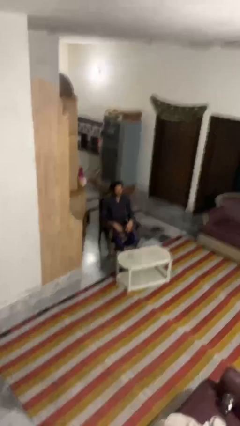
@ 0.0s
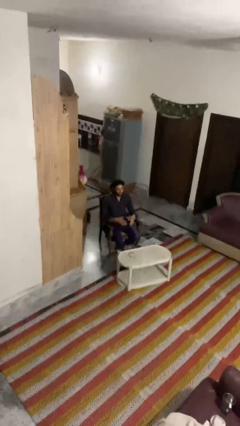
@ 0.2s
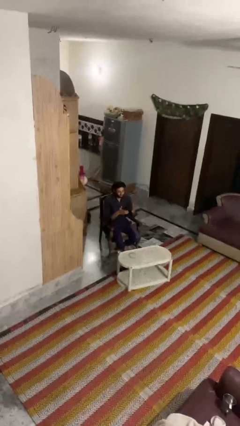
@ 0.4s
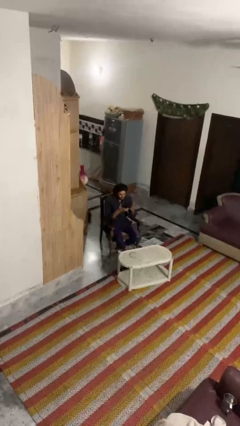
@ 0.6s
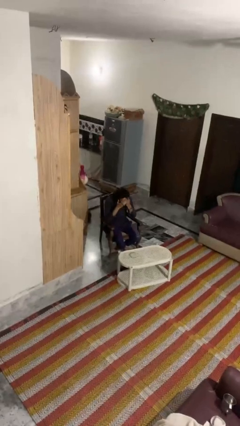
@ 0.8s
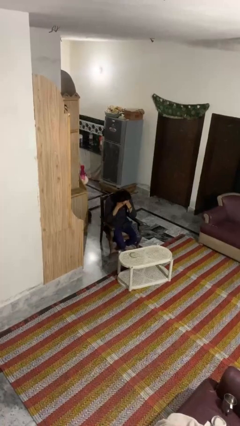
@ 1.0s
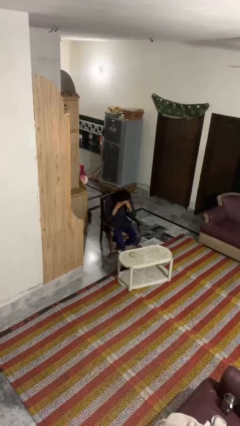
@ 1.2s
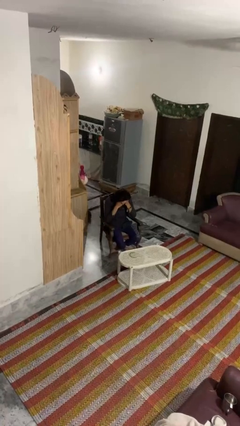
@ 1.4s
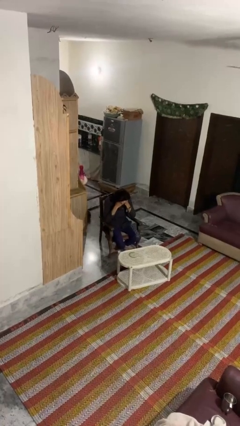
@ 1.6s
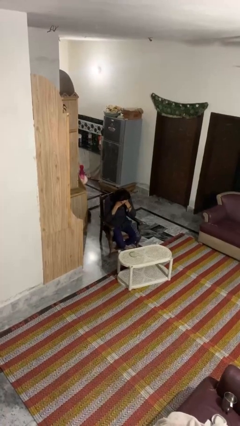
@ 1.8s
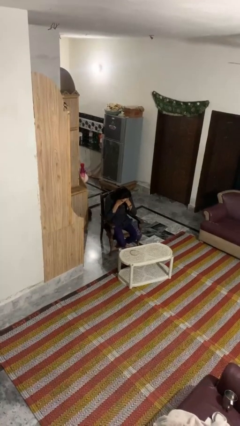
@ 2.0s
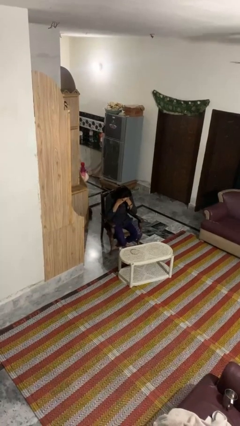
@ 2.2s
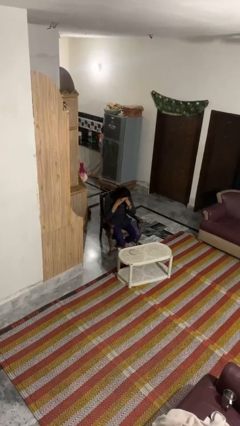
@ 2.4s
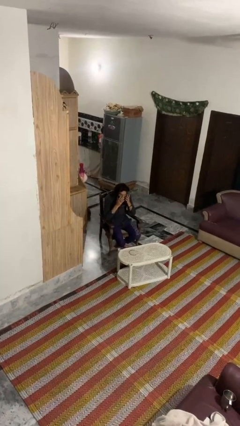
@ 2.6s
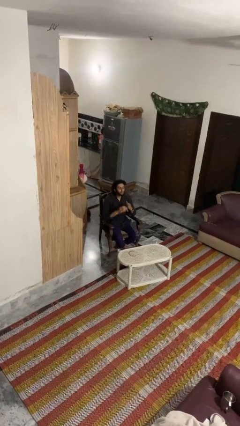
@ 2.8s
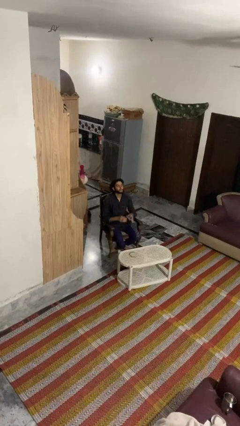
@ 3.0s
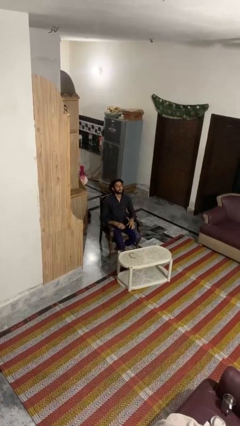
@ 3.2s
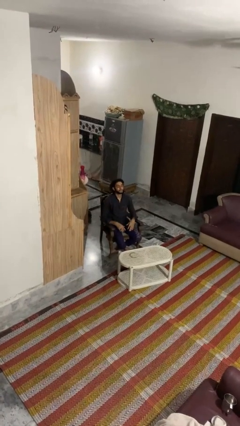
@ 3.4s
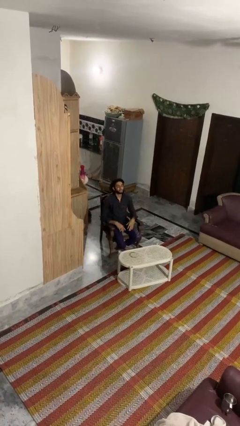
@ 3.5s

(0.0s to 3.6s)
person covers face with hands

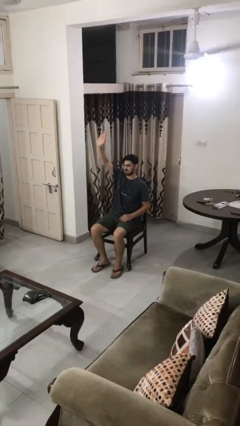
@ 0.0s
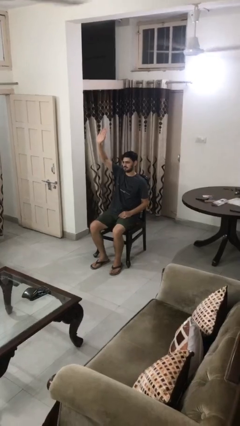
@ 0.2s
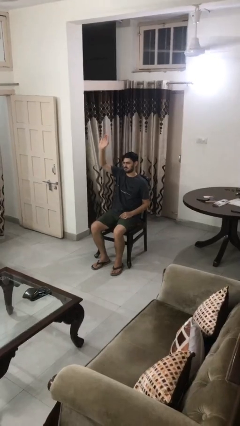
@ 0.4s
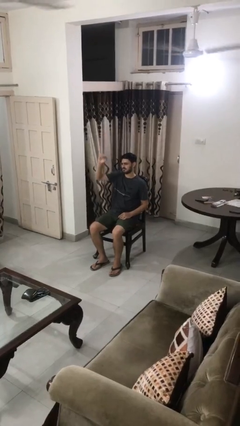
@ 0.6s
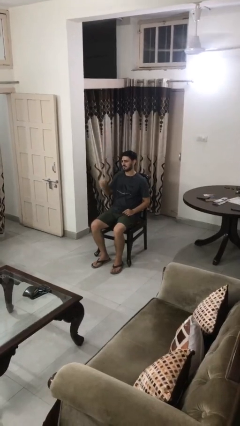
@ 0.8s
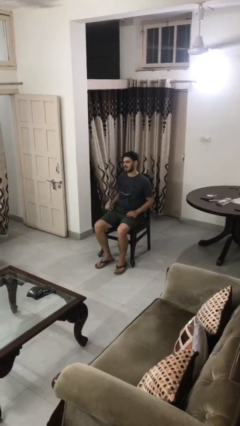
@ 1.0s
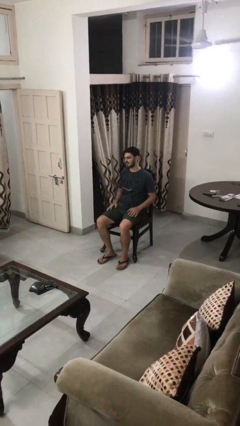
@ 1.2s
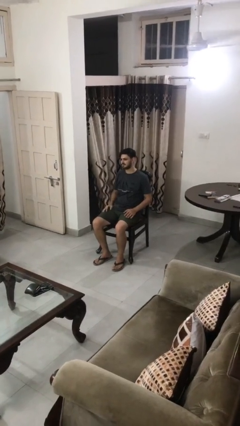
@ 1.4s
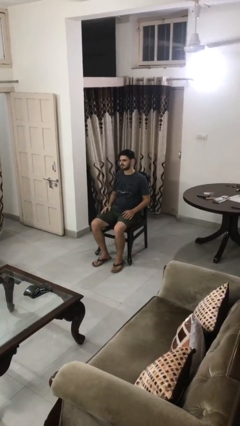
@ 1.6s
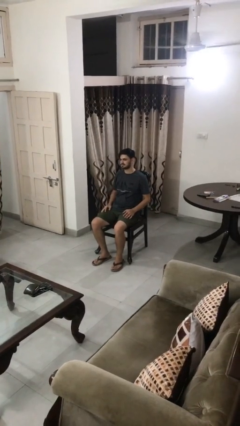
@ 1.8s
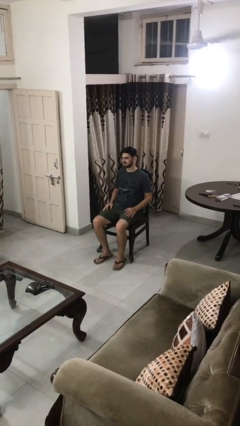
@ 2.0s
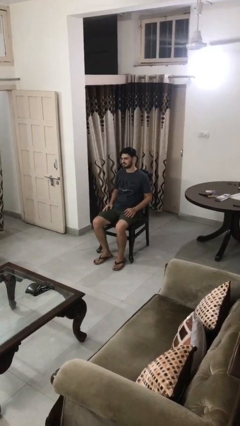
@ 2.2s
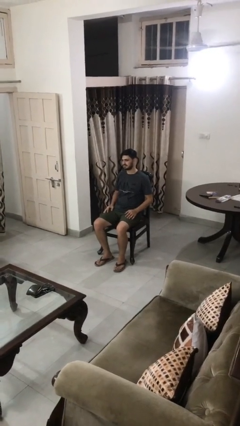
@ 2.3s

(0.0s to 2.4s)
person gestures lower hand

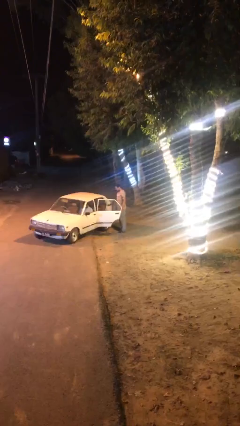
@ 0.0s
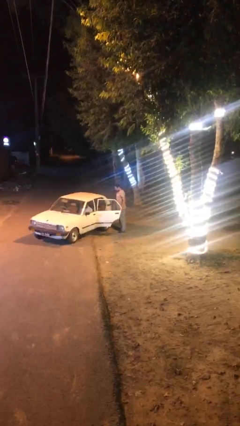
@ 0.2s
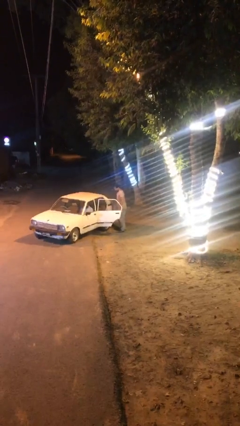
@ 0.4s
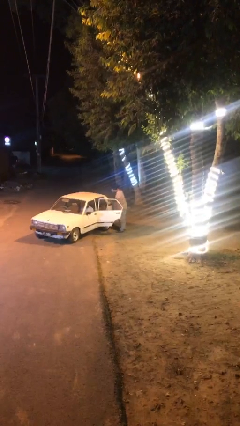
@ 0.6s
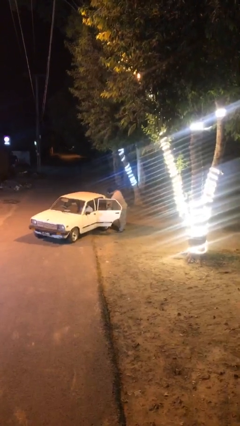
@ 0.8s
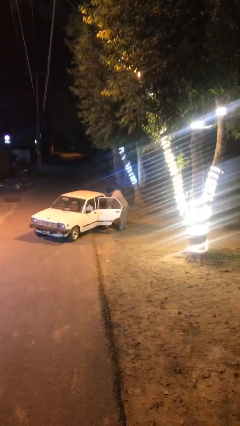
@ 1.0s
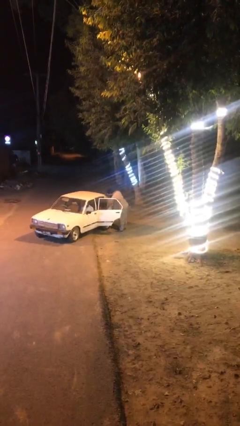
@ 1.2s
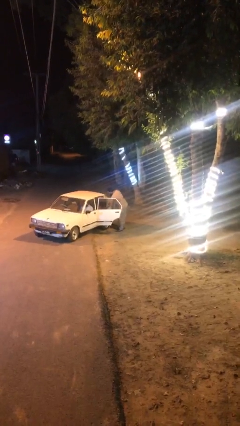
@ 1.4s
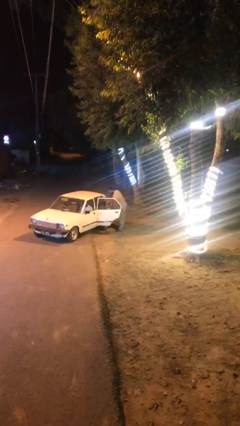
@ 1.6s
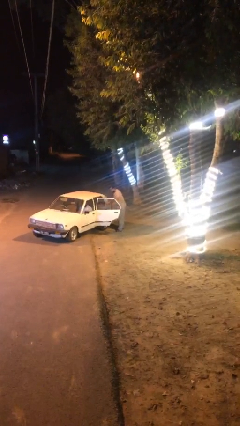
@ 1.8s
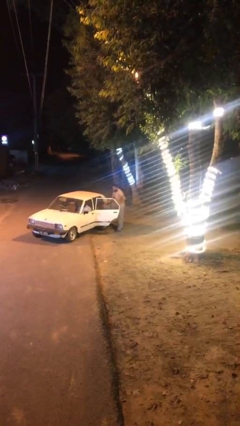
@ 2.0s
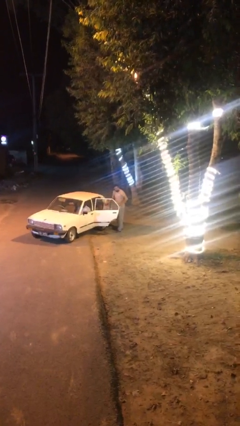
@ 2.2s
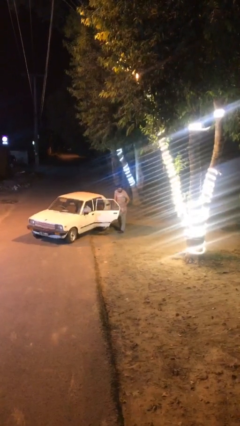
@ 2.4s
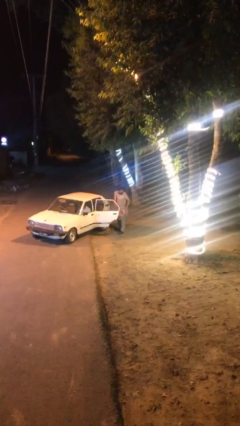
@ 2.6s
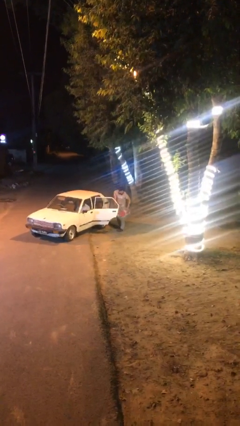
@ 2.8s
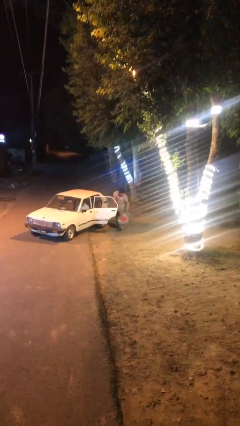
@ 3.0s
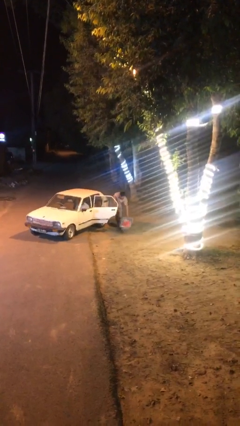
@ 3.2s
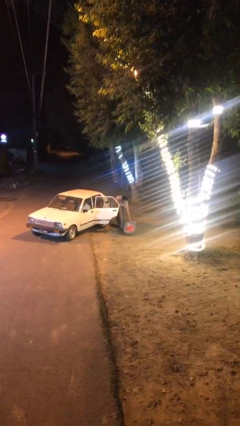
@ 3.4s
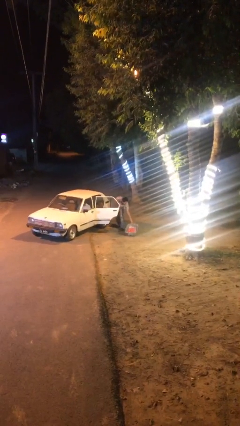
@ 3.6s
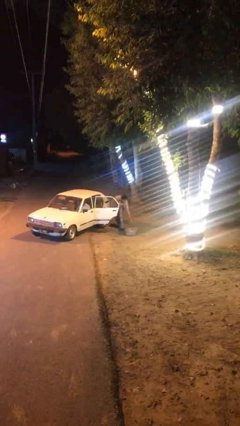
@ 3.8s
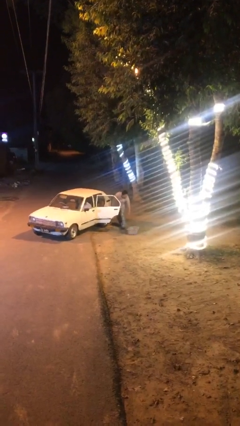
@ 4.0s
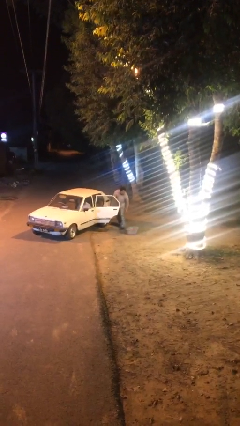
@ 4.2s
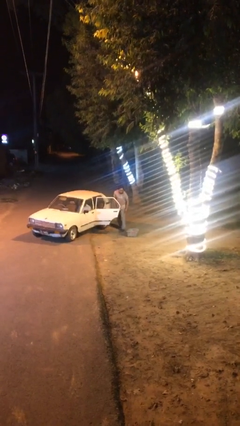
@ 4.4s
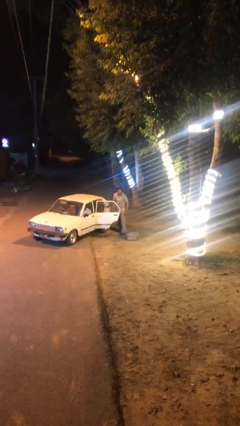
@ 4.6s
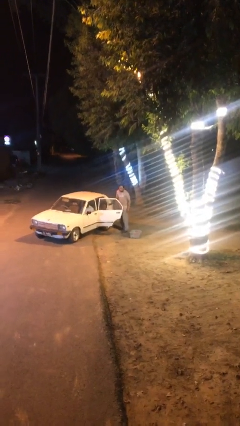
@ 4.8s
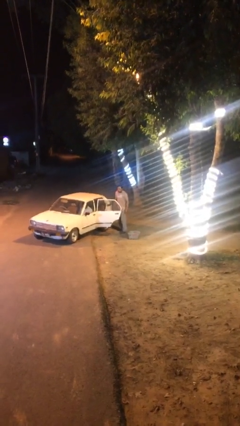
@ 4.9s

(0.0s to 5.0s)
person unloads car

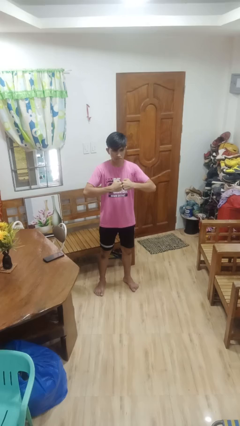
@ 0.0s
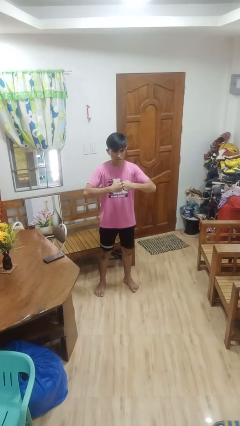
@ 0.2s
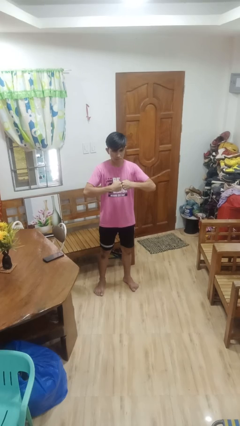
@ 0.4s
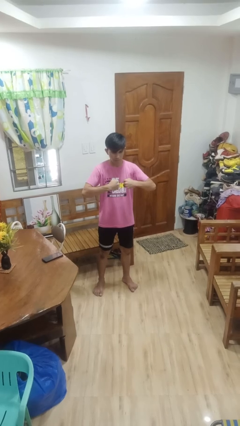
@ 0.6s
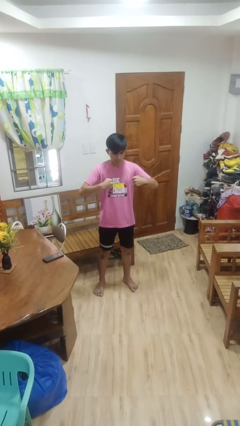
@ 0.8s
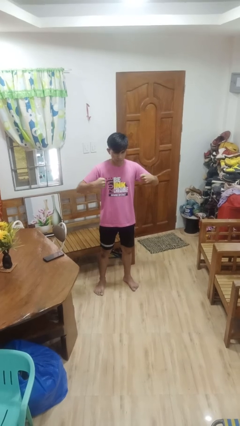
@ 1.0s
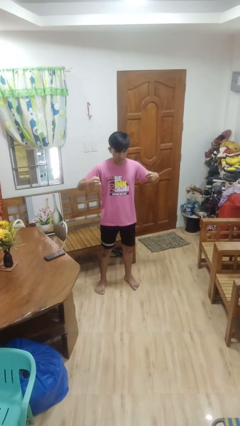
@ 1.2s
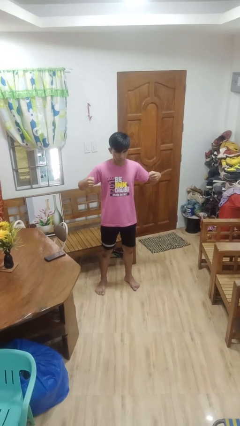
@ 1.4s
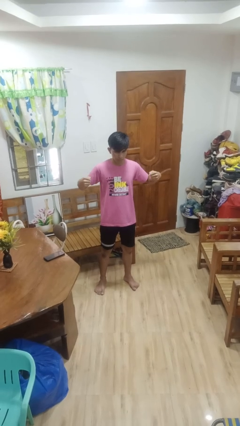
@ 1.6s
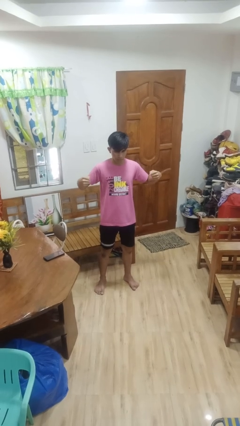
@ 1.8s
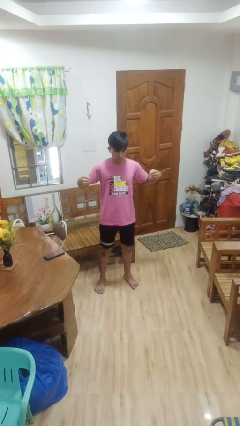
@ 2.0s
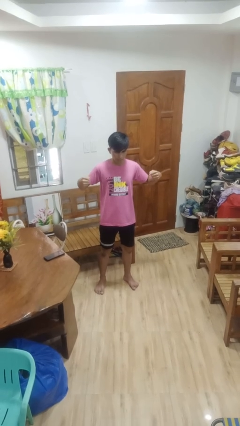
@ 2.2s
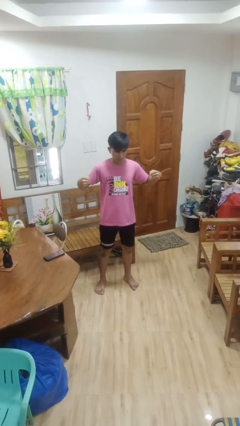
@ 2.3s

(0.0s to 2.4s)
person gestures zoom in

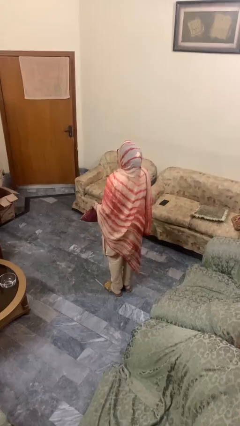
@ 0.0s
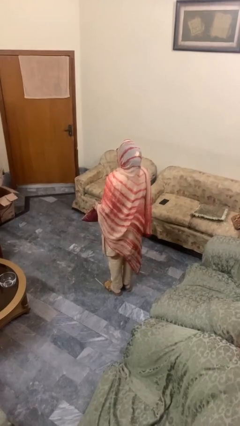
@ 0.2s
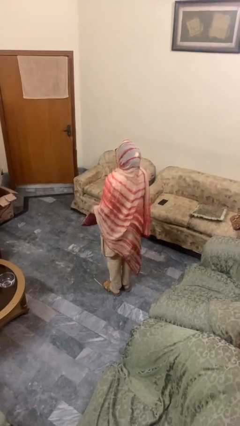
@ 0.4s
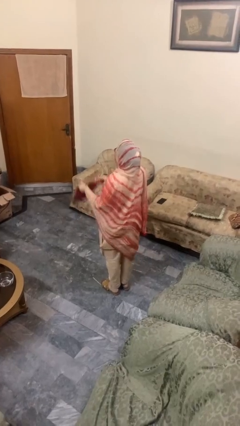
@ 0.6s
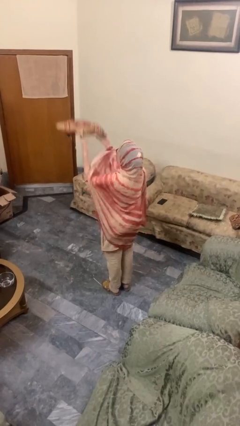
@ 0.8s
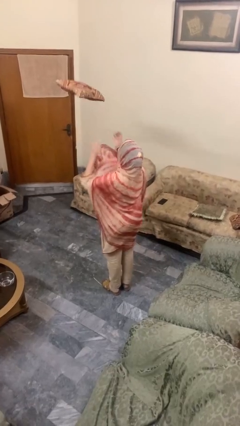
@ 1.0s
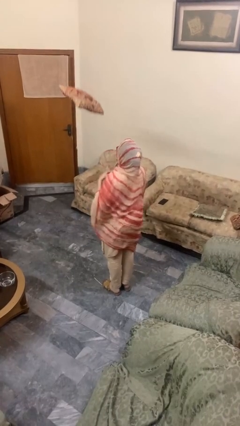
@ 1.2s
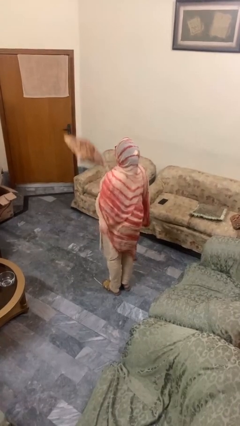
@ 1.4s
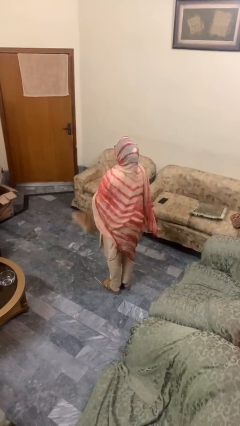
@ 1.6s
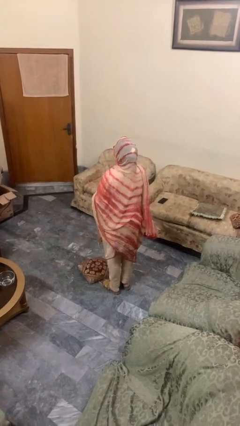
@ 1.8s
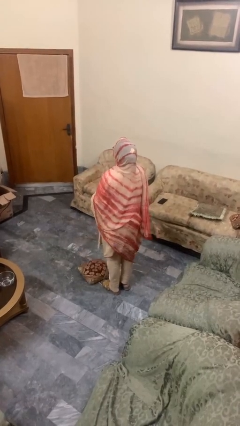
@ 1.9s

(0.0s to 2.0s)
person throws object into air

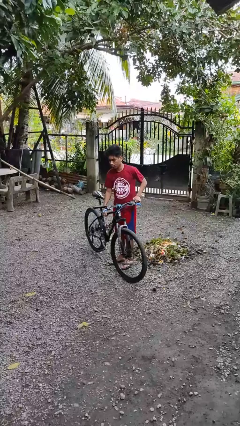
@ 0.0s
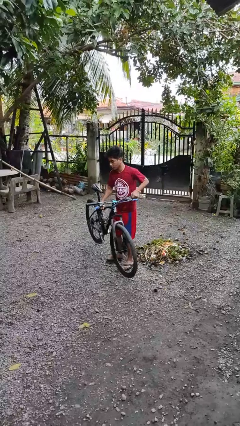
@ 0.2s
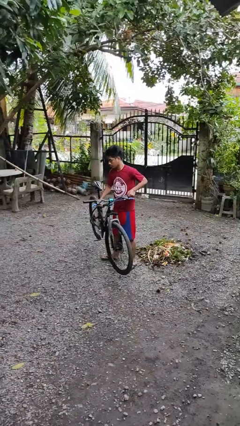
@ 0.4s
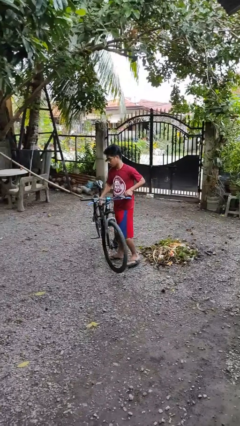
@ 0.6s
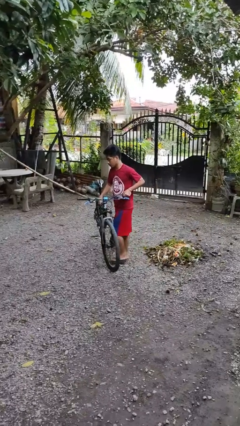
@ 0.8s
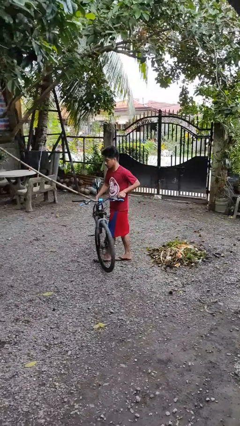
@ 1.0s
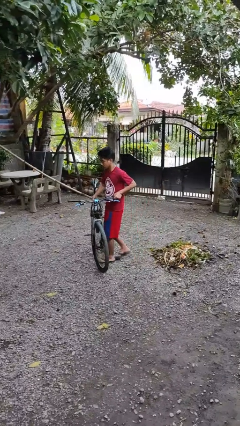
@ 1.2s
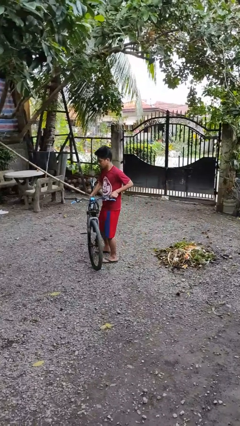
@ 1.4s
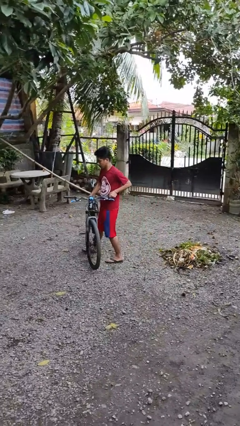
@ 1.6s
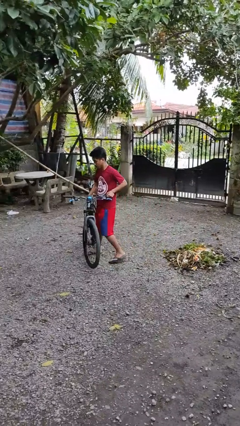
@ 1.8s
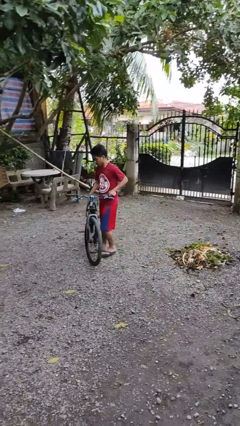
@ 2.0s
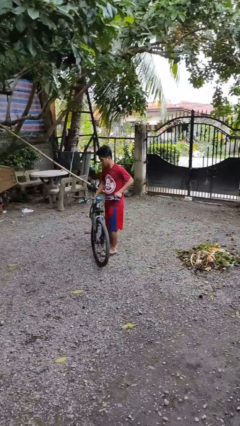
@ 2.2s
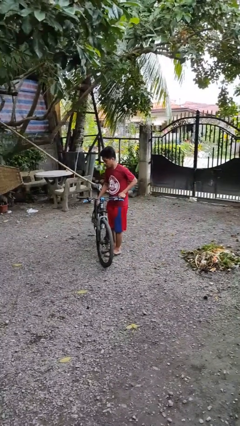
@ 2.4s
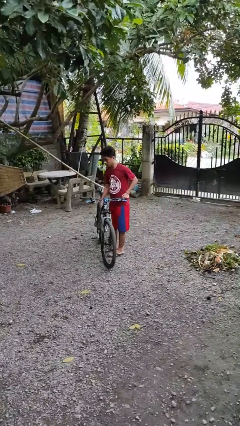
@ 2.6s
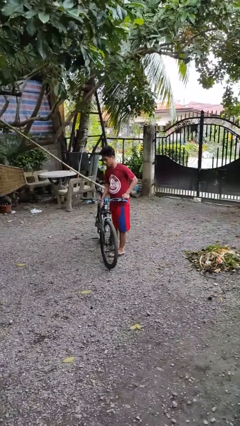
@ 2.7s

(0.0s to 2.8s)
person carries bicycle
